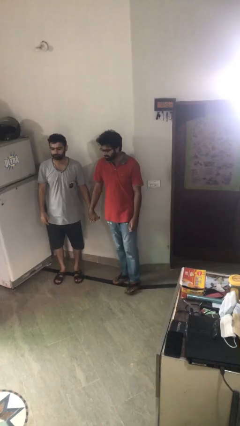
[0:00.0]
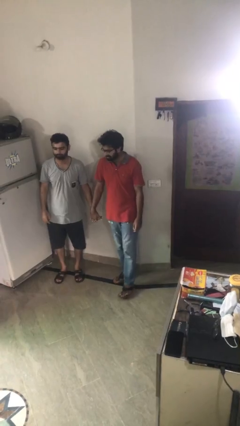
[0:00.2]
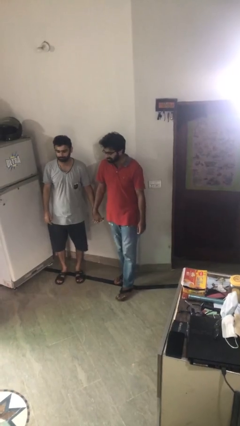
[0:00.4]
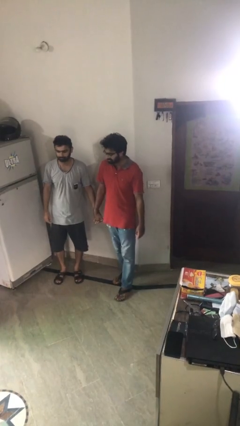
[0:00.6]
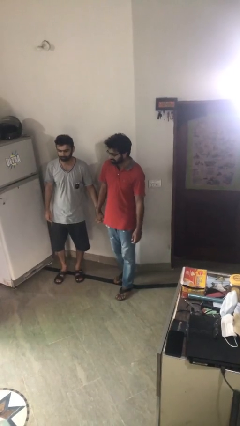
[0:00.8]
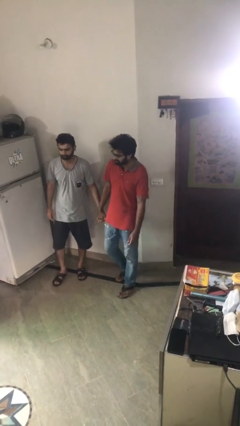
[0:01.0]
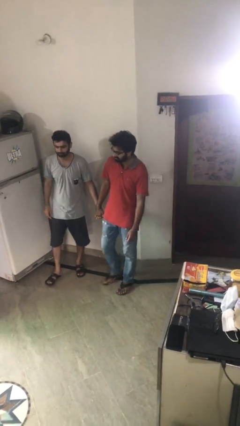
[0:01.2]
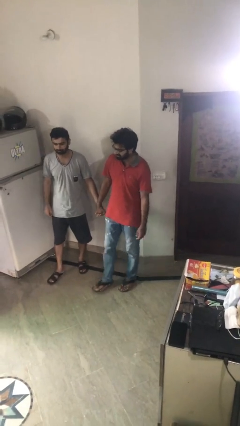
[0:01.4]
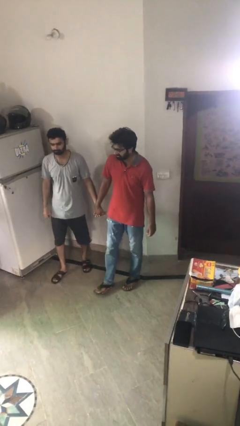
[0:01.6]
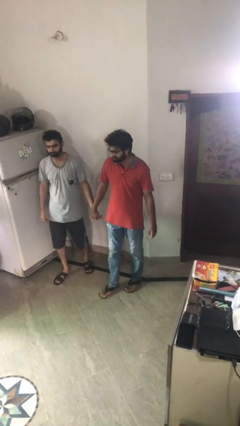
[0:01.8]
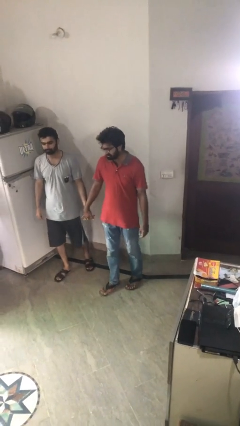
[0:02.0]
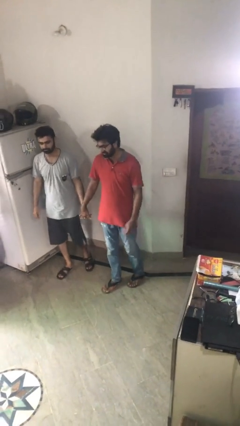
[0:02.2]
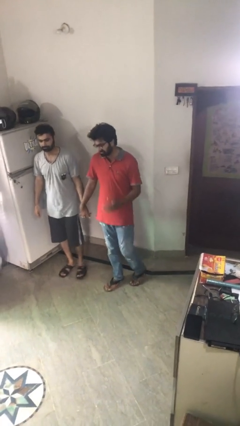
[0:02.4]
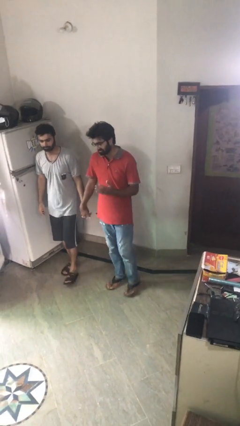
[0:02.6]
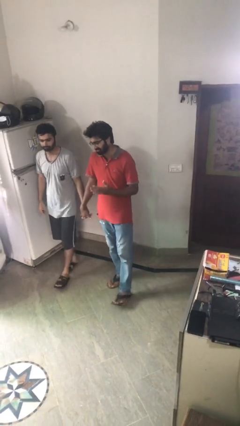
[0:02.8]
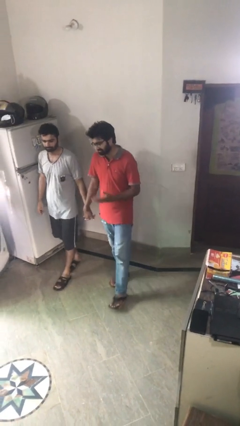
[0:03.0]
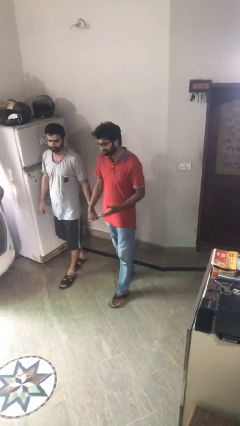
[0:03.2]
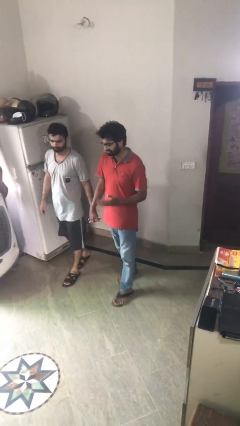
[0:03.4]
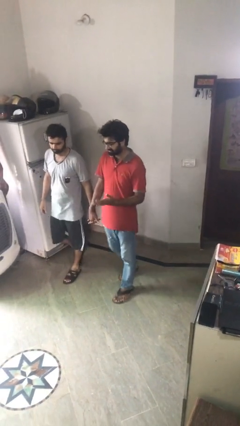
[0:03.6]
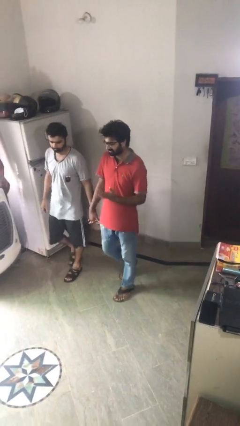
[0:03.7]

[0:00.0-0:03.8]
person holds hand

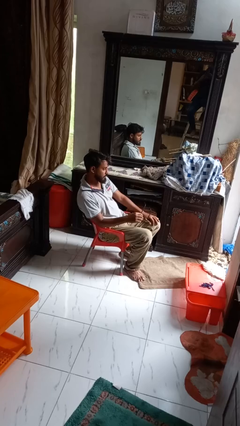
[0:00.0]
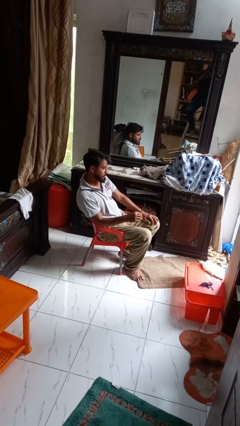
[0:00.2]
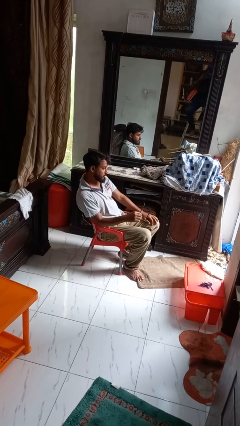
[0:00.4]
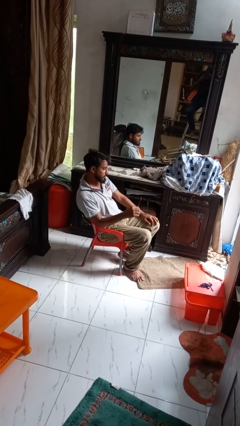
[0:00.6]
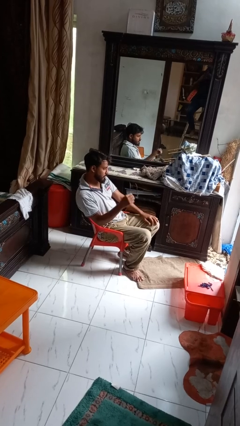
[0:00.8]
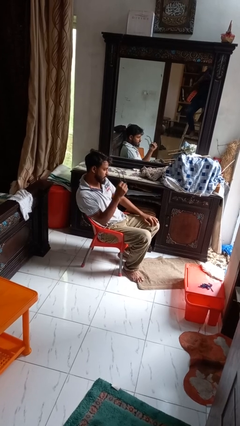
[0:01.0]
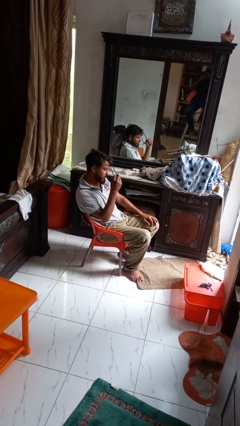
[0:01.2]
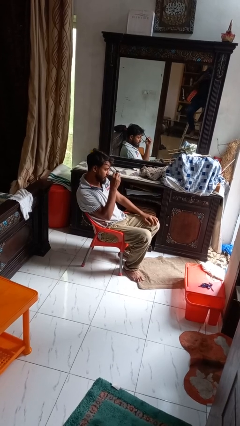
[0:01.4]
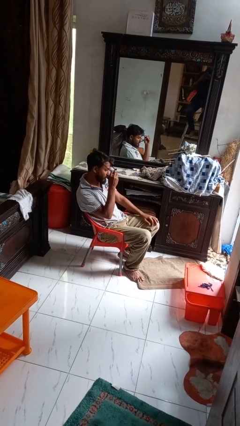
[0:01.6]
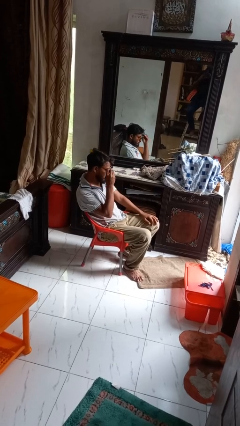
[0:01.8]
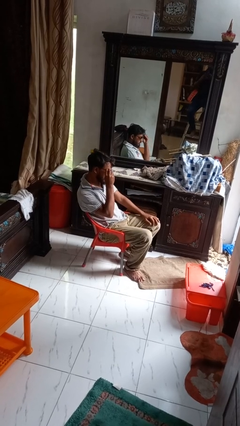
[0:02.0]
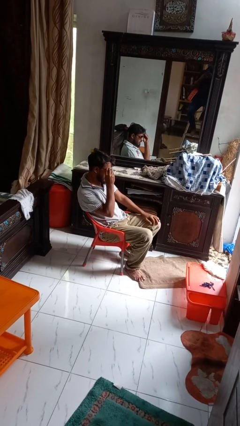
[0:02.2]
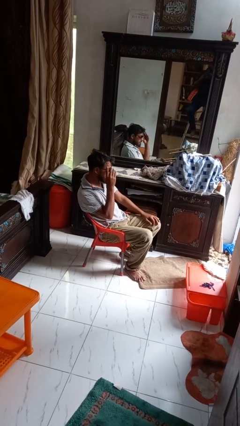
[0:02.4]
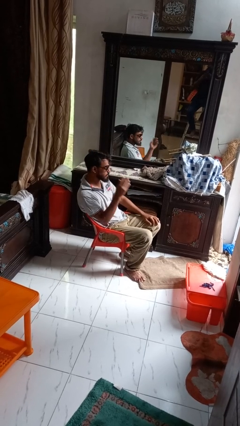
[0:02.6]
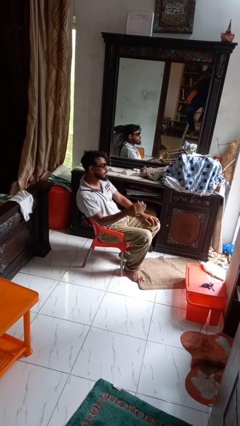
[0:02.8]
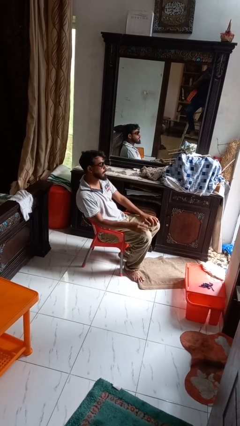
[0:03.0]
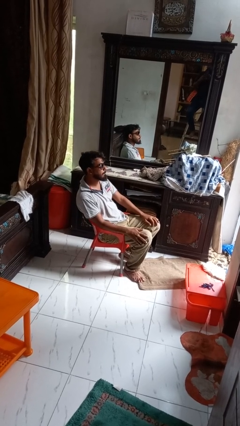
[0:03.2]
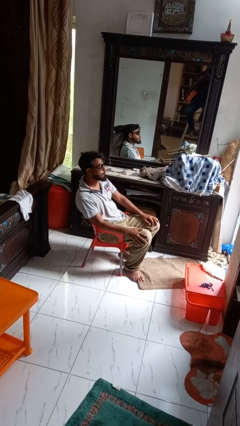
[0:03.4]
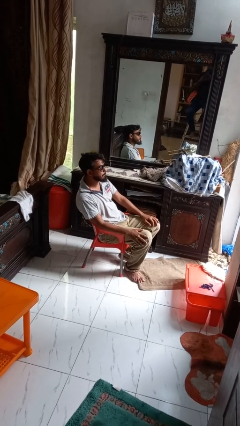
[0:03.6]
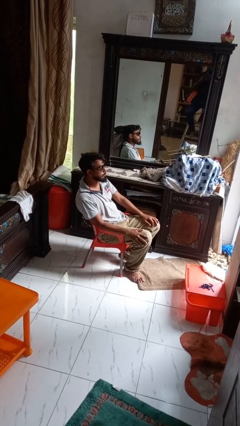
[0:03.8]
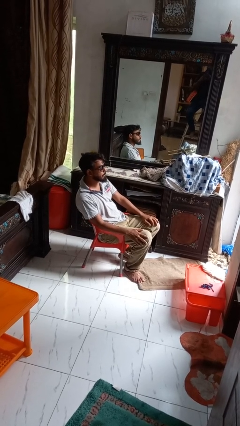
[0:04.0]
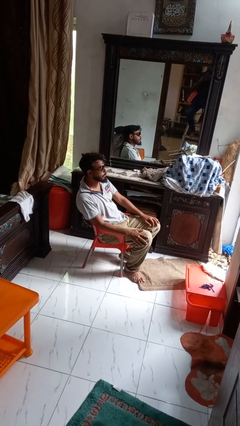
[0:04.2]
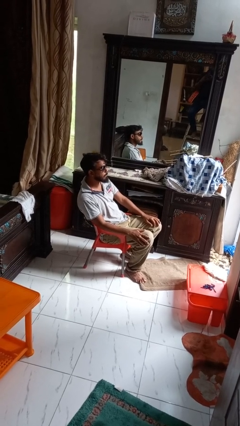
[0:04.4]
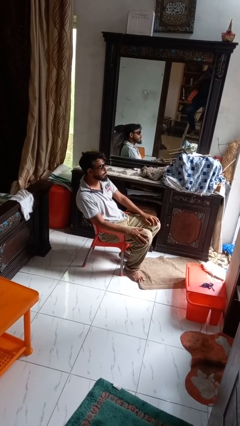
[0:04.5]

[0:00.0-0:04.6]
person puts on sunglasses

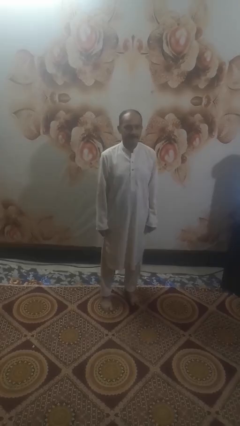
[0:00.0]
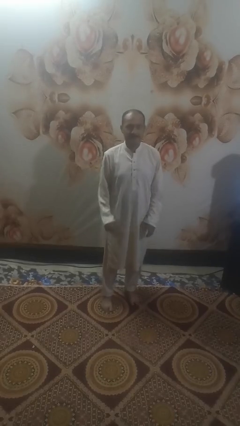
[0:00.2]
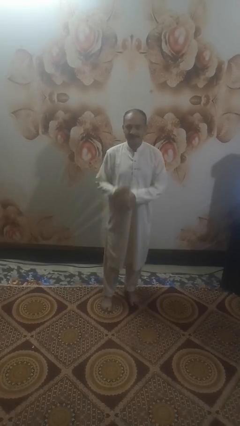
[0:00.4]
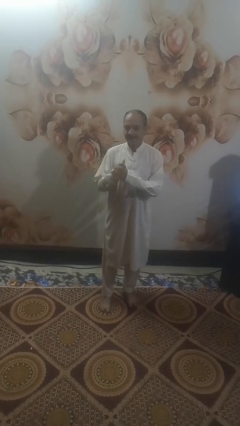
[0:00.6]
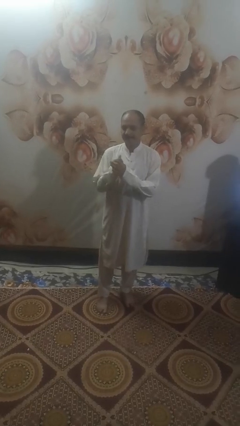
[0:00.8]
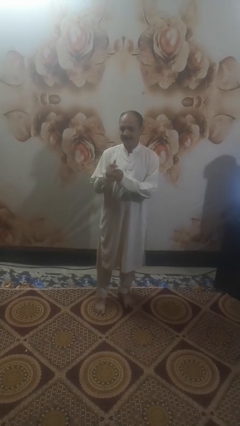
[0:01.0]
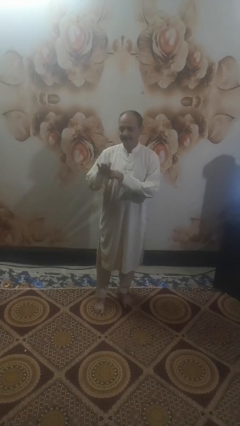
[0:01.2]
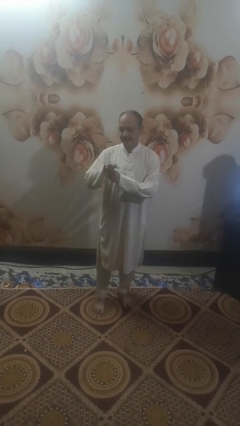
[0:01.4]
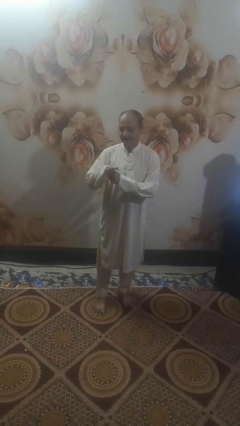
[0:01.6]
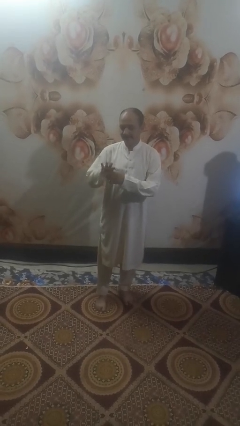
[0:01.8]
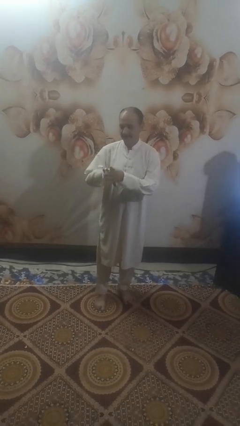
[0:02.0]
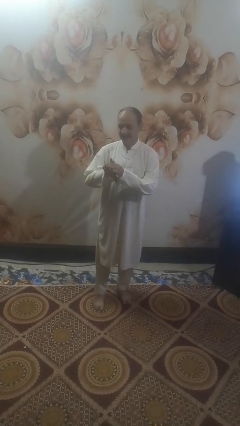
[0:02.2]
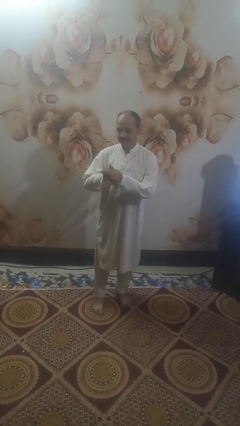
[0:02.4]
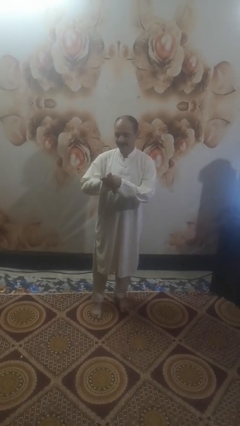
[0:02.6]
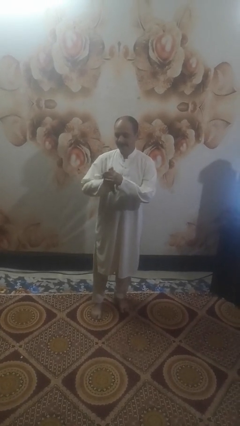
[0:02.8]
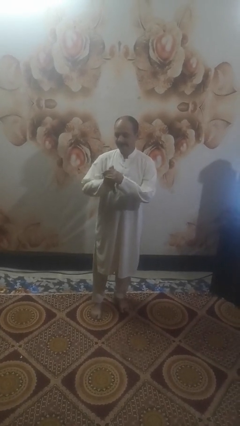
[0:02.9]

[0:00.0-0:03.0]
person cracks knuckles

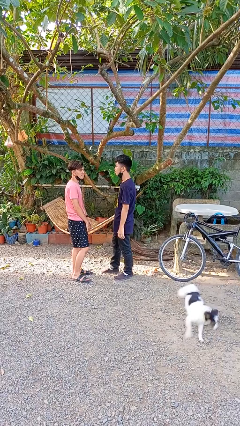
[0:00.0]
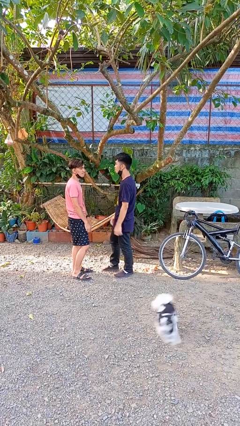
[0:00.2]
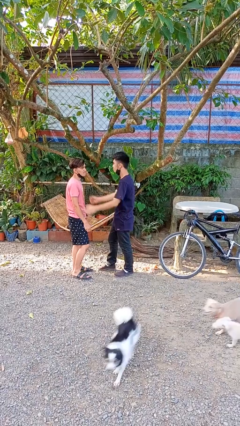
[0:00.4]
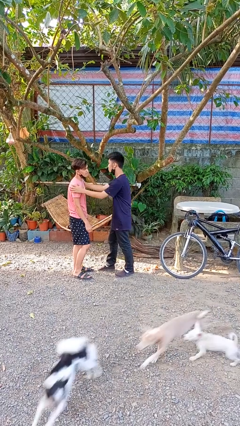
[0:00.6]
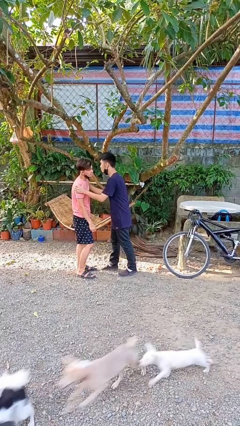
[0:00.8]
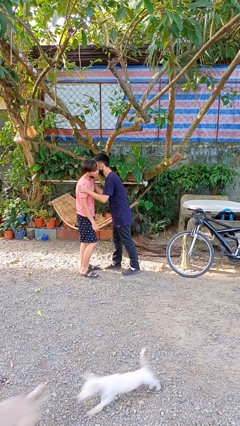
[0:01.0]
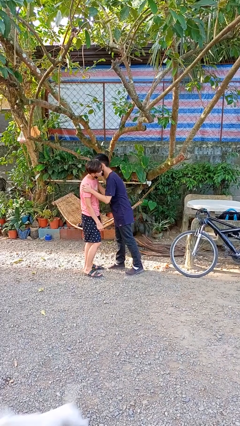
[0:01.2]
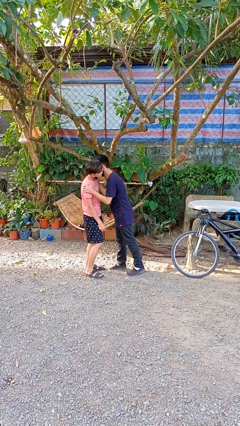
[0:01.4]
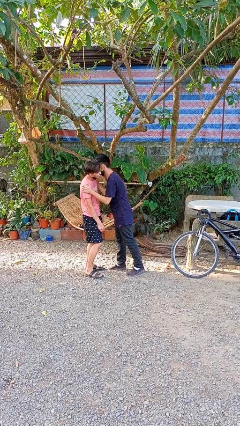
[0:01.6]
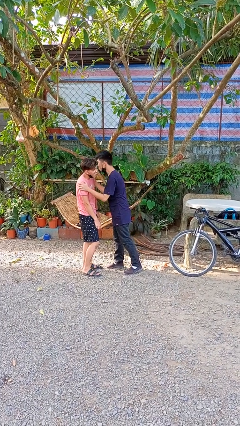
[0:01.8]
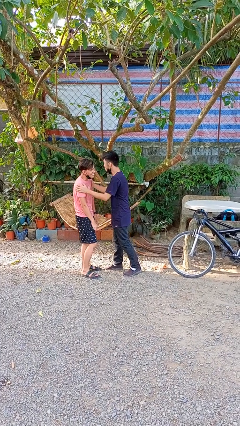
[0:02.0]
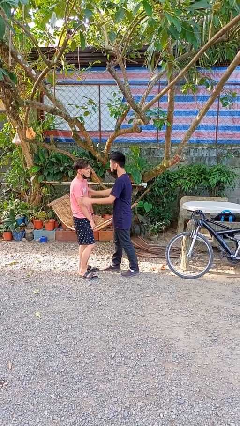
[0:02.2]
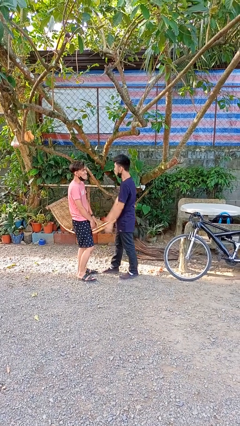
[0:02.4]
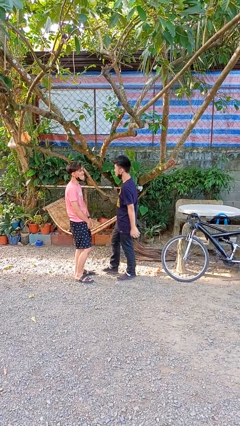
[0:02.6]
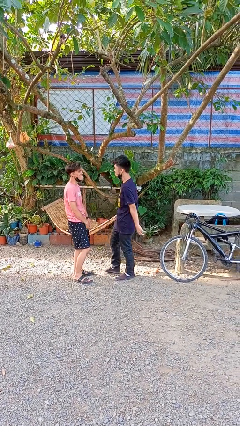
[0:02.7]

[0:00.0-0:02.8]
person kisses cheek of person

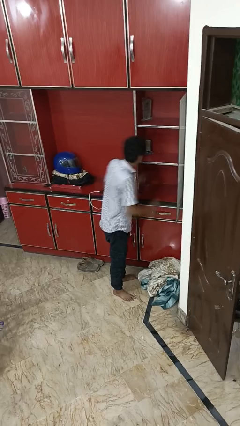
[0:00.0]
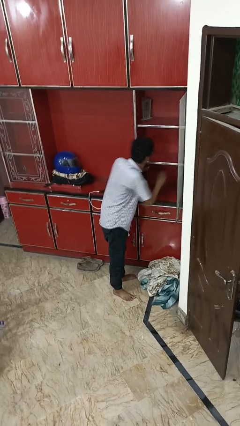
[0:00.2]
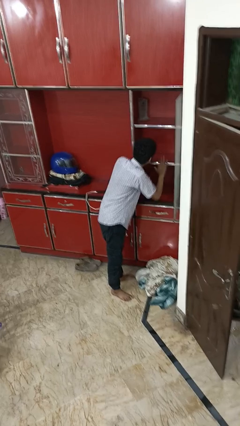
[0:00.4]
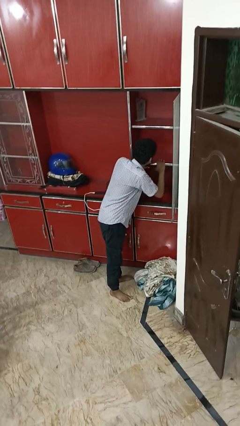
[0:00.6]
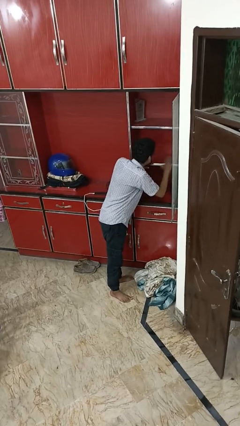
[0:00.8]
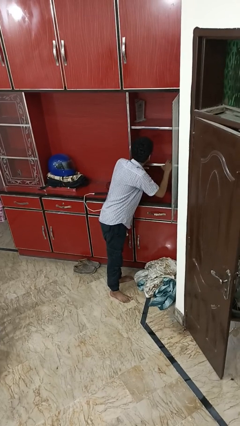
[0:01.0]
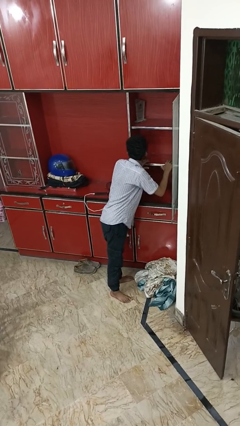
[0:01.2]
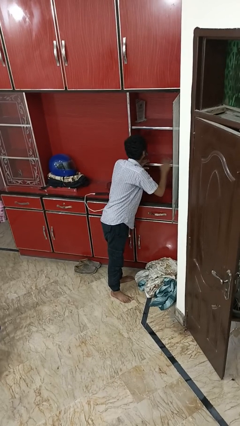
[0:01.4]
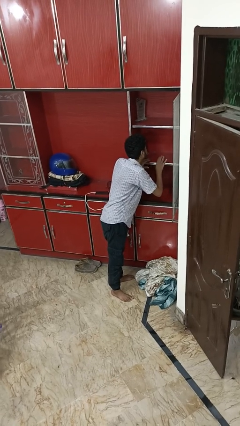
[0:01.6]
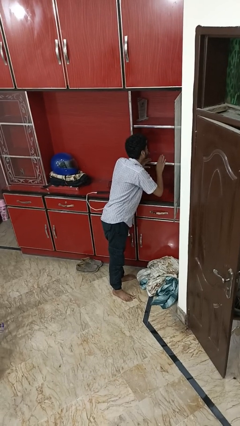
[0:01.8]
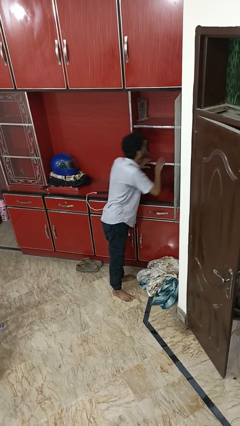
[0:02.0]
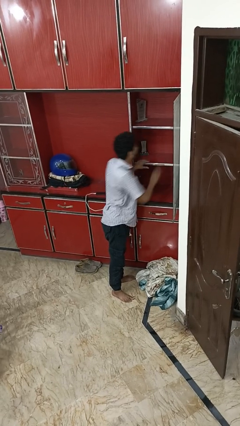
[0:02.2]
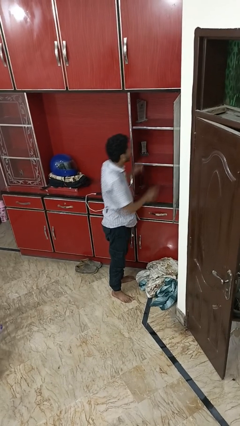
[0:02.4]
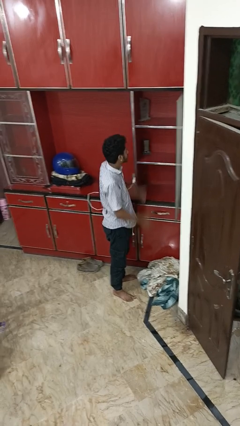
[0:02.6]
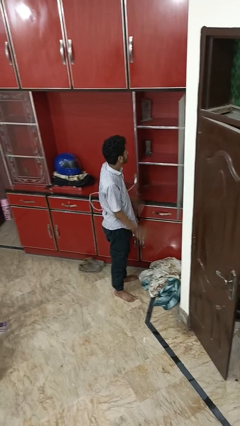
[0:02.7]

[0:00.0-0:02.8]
person searches in cabinet

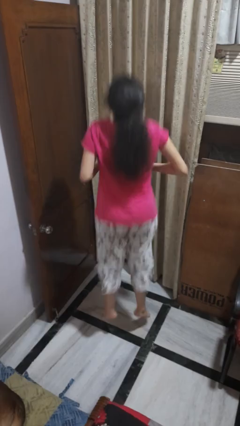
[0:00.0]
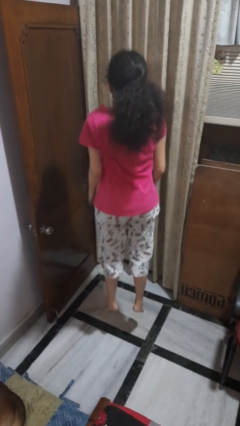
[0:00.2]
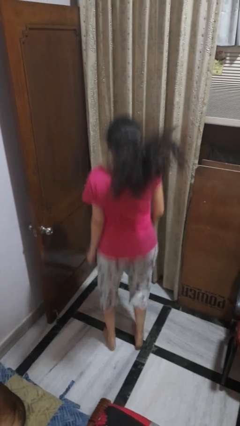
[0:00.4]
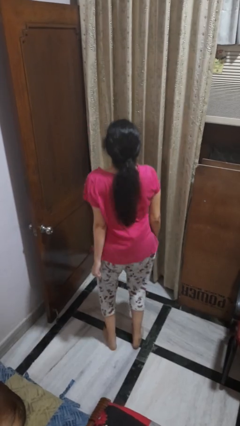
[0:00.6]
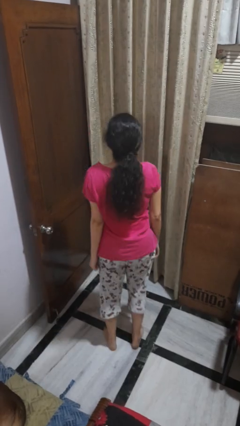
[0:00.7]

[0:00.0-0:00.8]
person jumps
